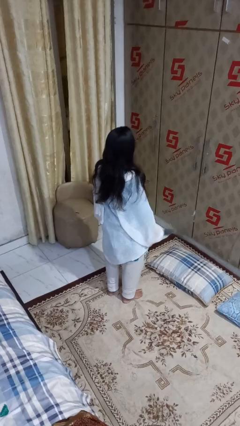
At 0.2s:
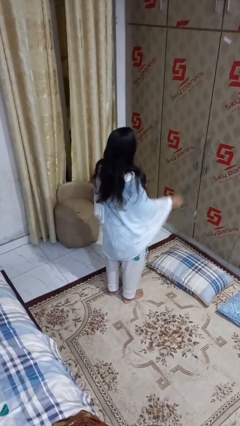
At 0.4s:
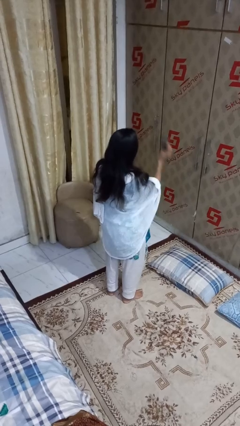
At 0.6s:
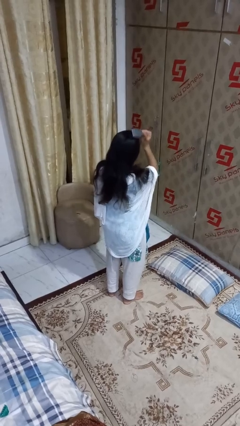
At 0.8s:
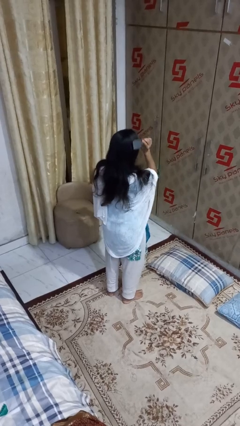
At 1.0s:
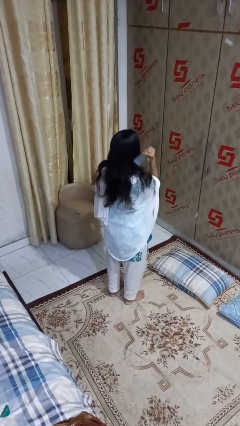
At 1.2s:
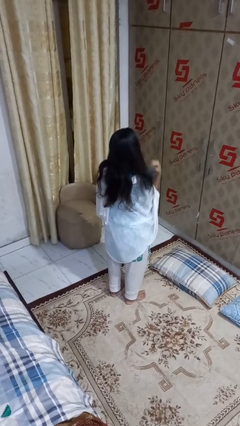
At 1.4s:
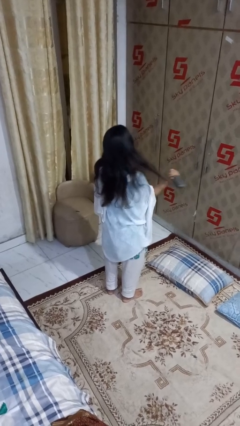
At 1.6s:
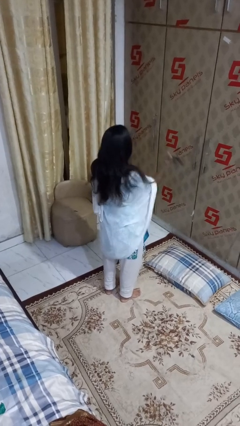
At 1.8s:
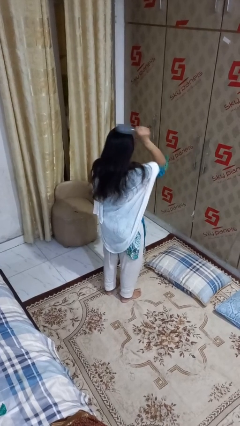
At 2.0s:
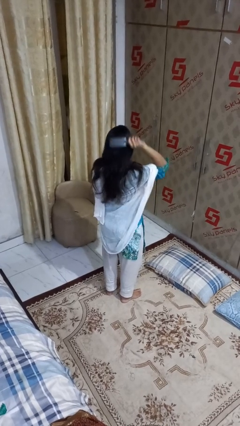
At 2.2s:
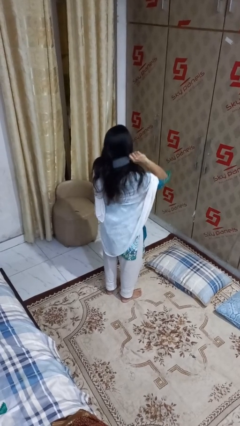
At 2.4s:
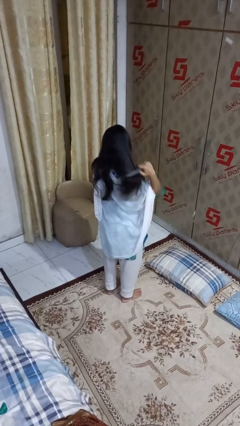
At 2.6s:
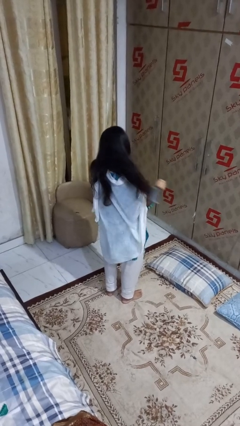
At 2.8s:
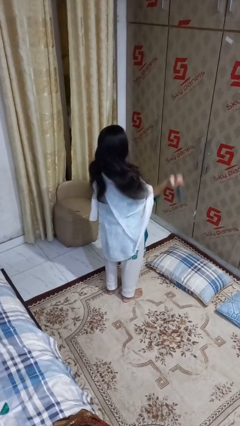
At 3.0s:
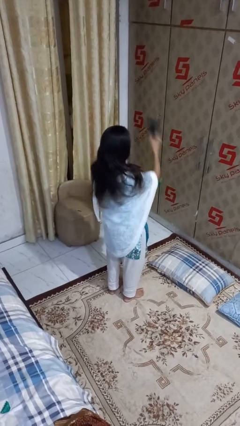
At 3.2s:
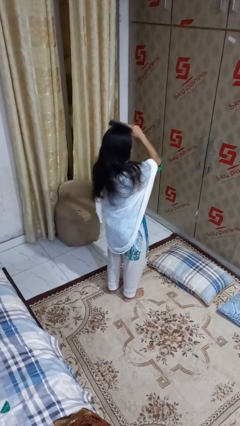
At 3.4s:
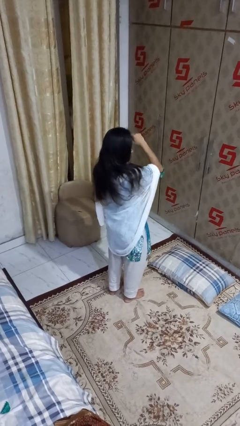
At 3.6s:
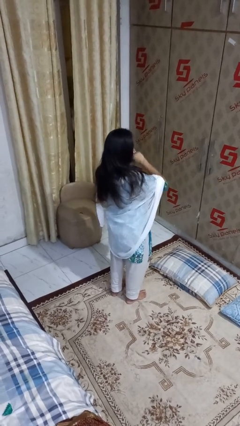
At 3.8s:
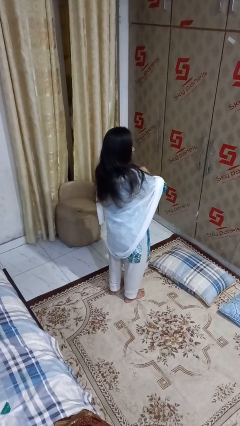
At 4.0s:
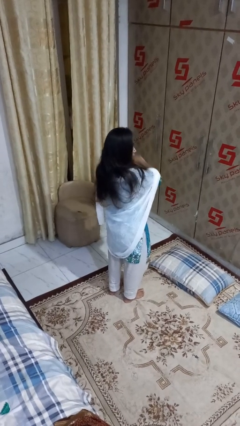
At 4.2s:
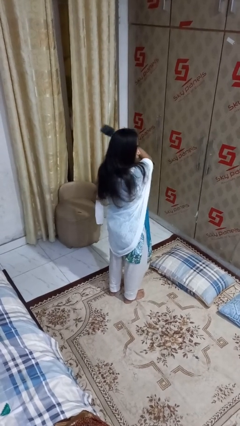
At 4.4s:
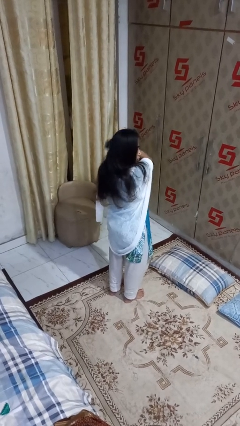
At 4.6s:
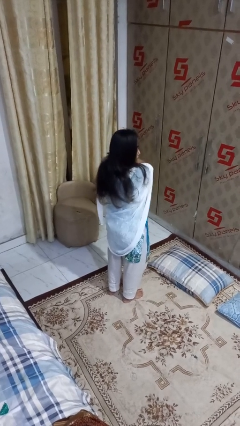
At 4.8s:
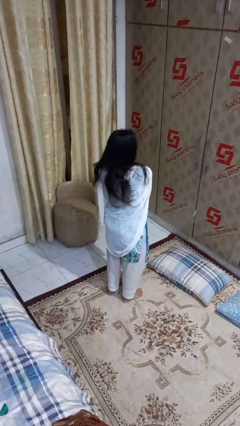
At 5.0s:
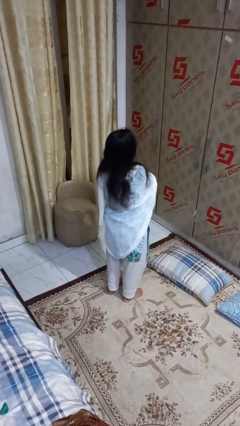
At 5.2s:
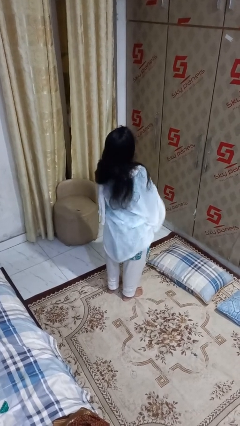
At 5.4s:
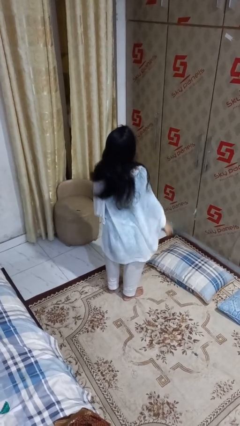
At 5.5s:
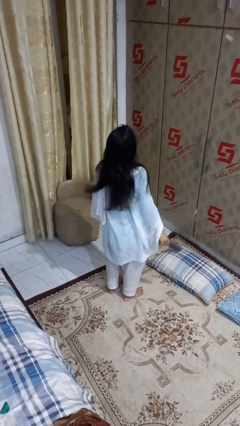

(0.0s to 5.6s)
person brushes hair

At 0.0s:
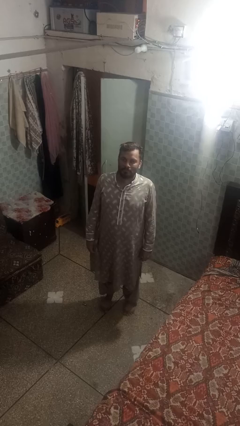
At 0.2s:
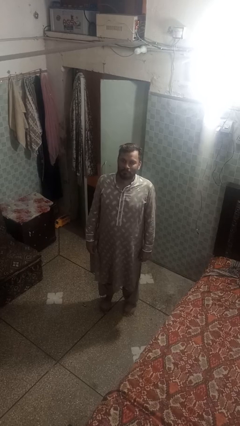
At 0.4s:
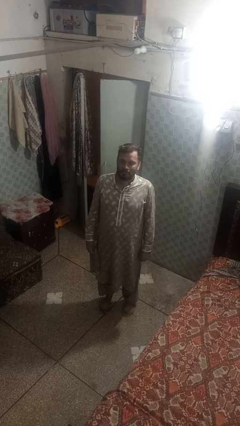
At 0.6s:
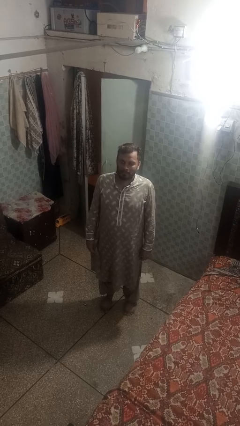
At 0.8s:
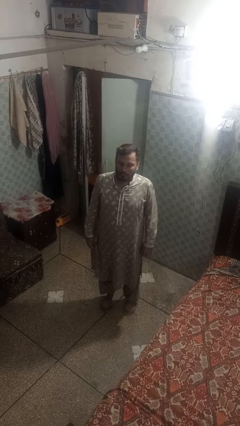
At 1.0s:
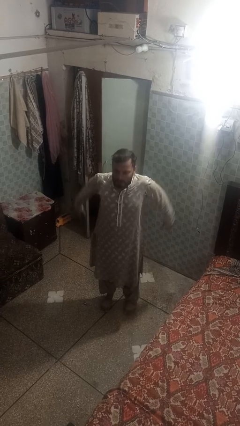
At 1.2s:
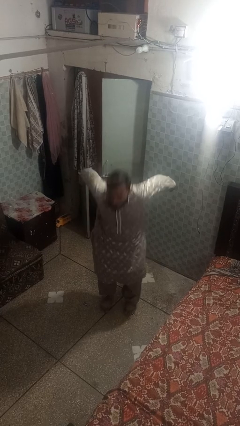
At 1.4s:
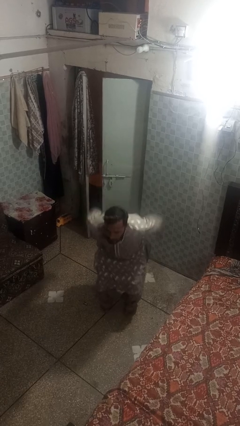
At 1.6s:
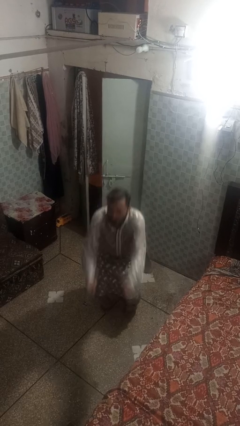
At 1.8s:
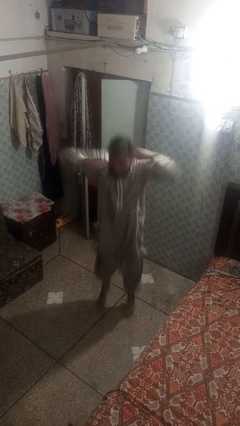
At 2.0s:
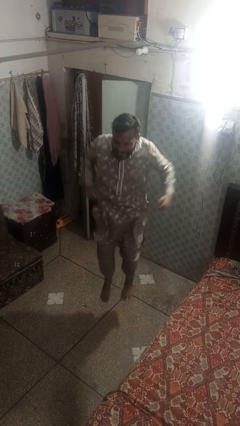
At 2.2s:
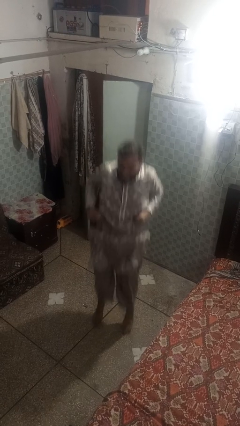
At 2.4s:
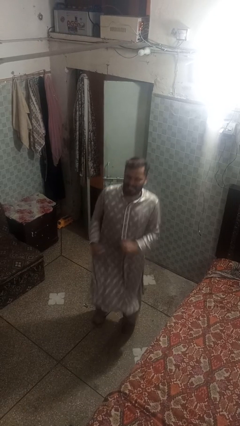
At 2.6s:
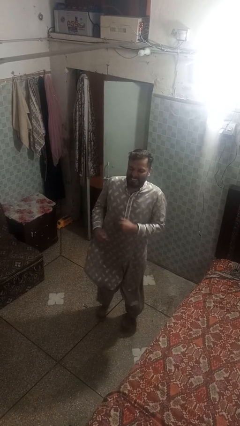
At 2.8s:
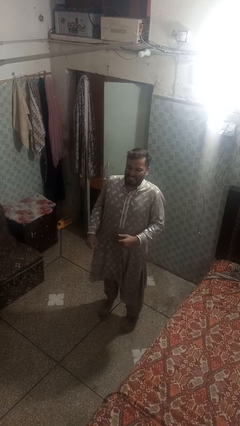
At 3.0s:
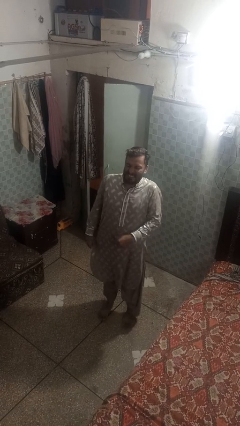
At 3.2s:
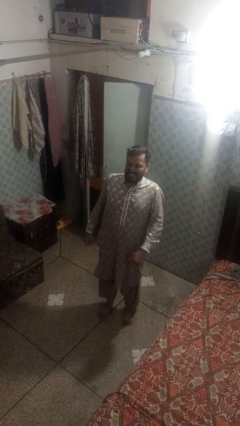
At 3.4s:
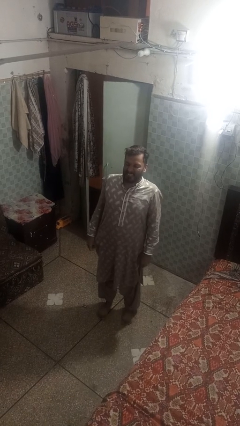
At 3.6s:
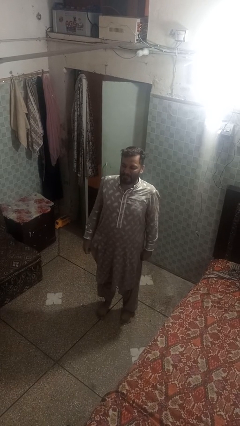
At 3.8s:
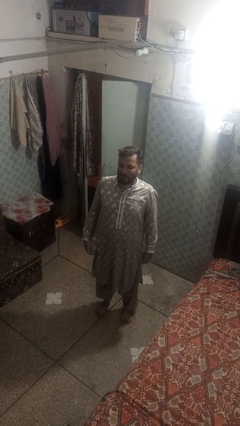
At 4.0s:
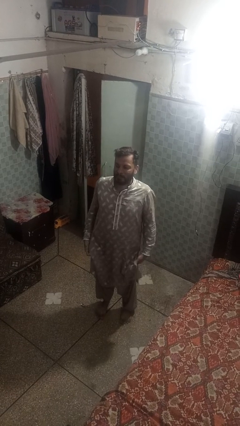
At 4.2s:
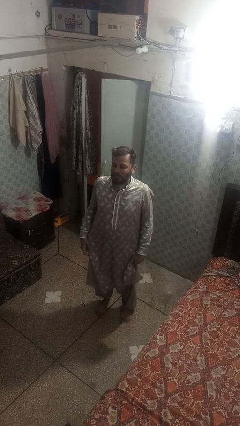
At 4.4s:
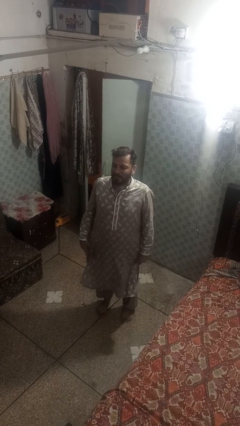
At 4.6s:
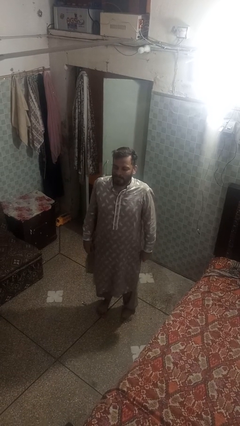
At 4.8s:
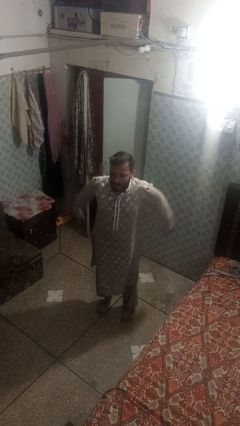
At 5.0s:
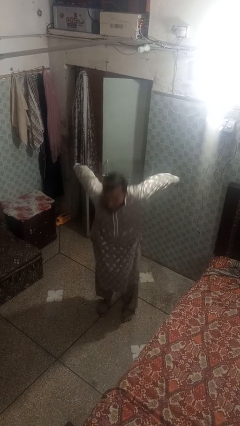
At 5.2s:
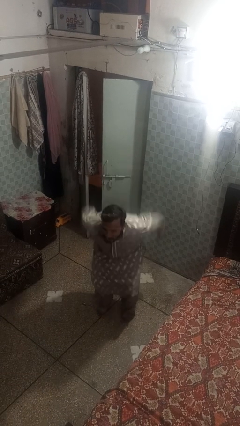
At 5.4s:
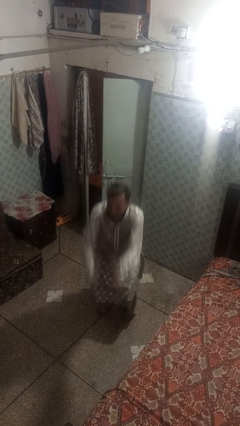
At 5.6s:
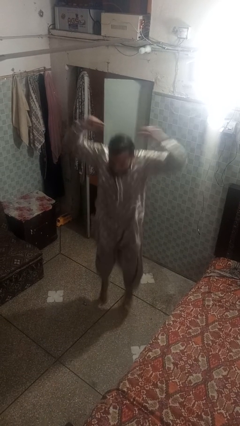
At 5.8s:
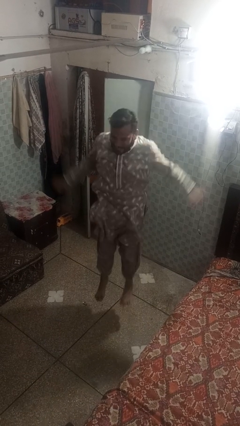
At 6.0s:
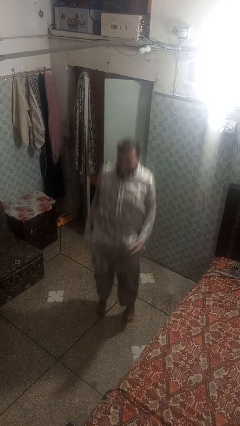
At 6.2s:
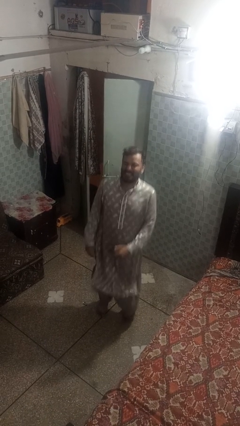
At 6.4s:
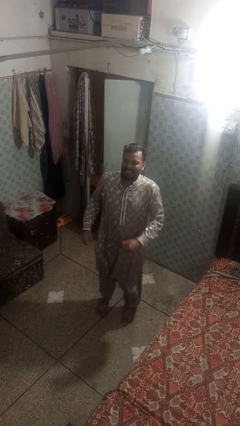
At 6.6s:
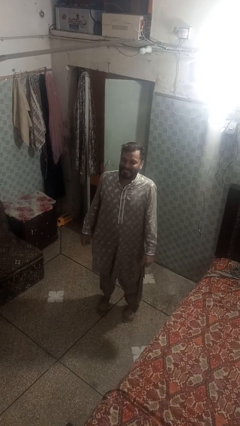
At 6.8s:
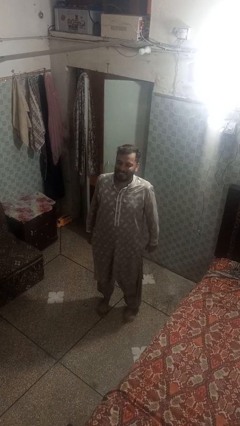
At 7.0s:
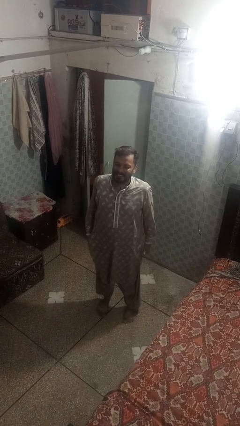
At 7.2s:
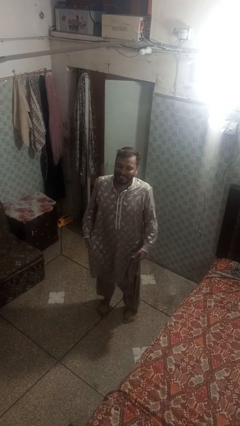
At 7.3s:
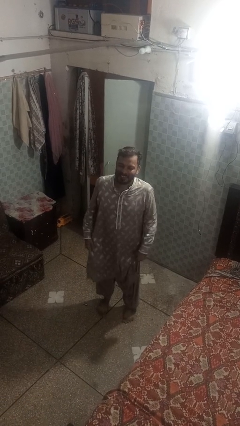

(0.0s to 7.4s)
person jumps

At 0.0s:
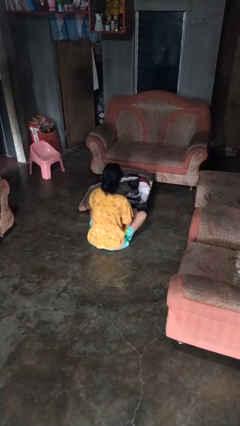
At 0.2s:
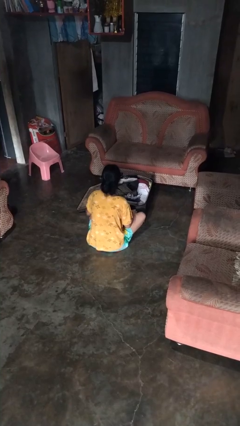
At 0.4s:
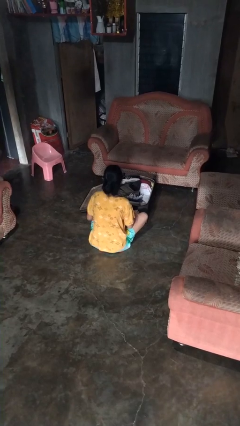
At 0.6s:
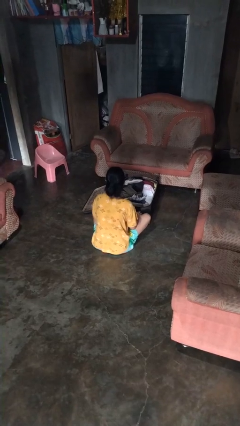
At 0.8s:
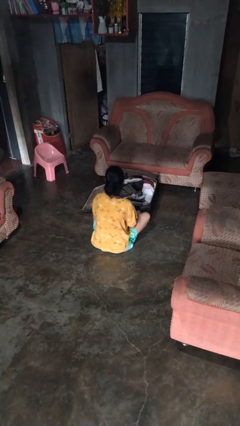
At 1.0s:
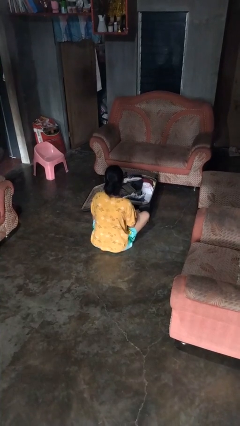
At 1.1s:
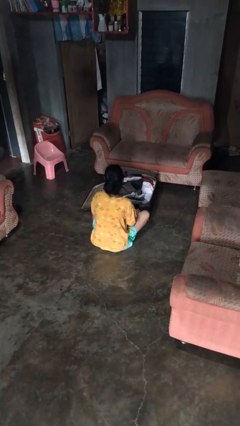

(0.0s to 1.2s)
person closes suitcase

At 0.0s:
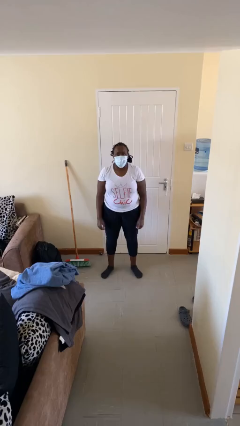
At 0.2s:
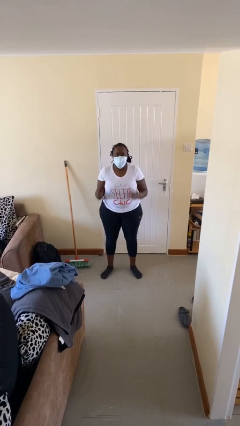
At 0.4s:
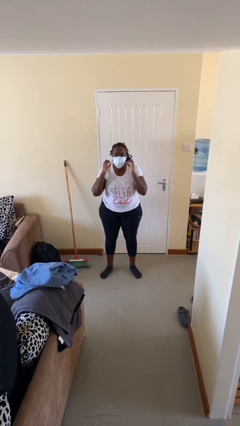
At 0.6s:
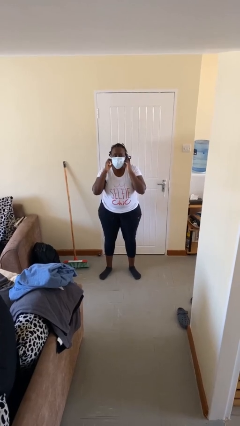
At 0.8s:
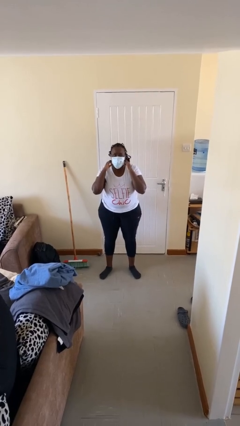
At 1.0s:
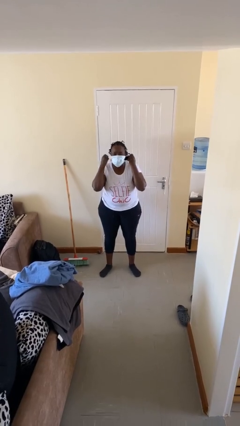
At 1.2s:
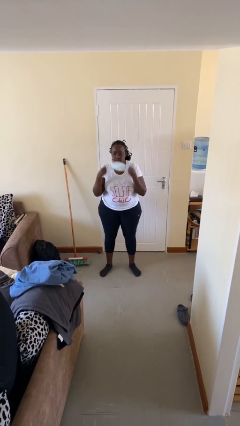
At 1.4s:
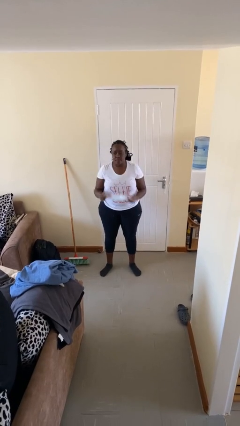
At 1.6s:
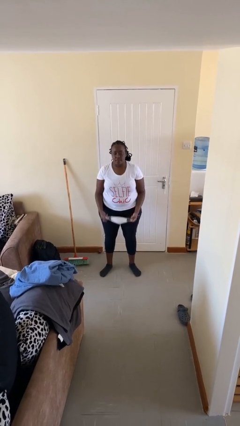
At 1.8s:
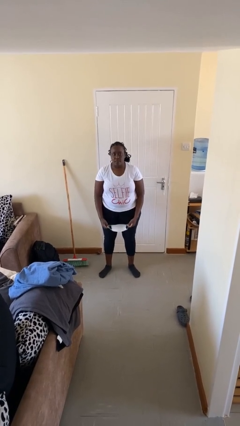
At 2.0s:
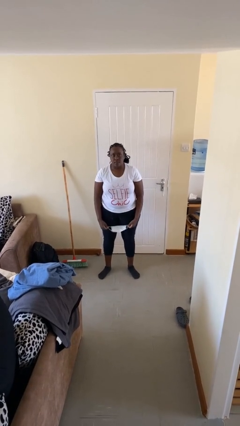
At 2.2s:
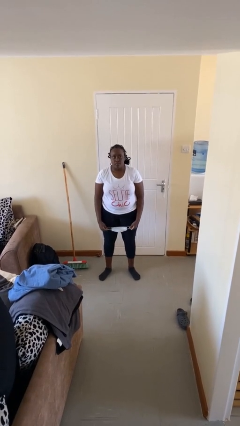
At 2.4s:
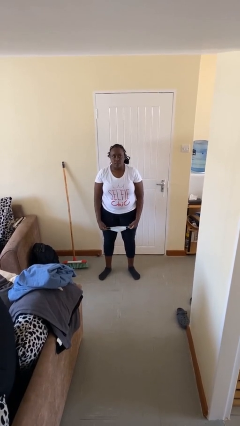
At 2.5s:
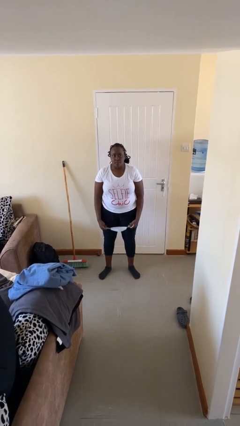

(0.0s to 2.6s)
person takes off facemask

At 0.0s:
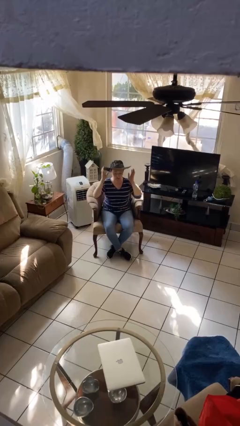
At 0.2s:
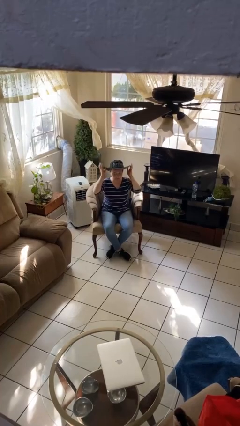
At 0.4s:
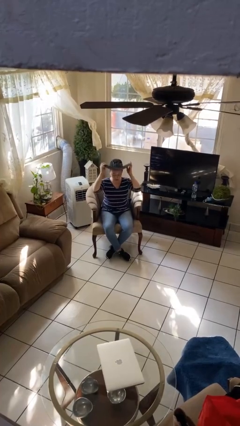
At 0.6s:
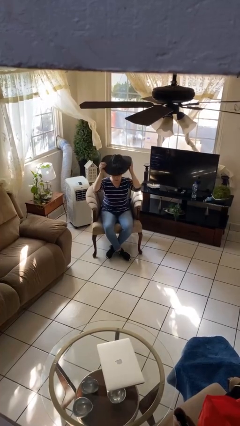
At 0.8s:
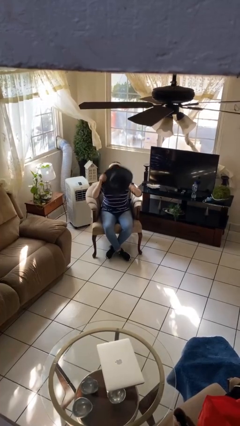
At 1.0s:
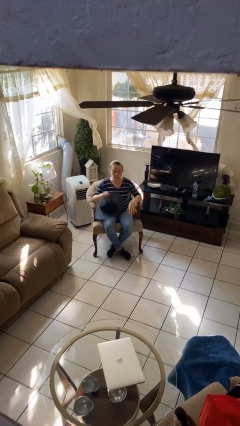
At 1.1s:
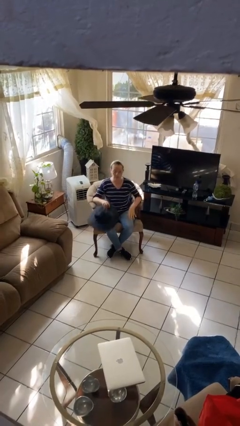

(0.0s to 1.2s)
person takes off hat
